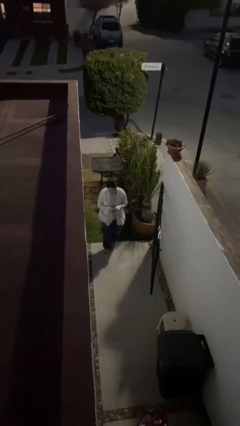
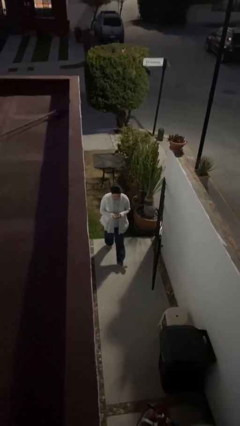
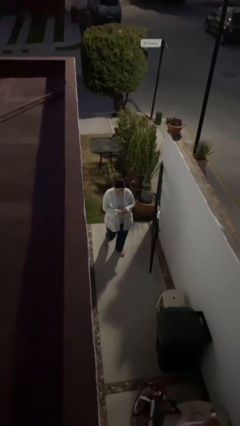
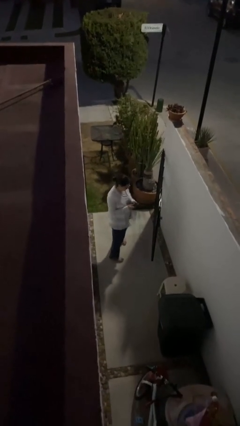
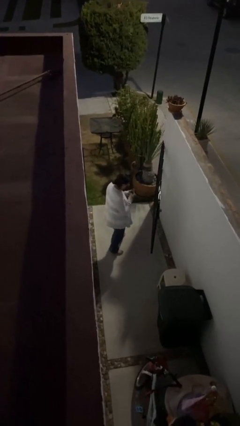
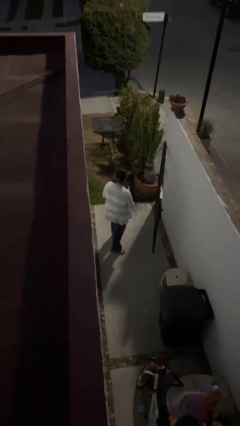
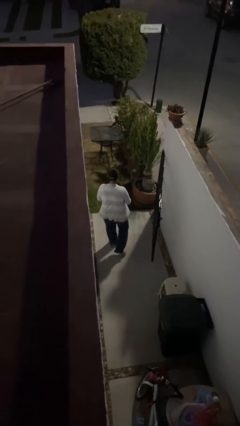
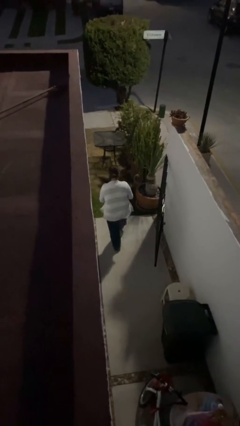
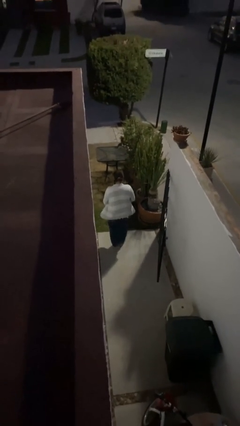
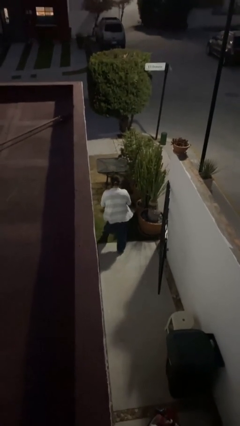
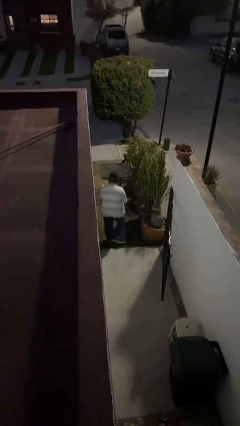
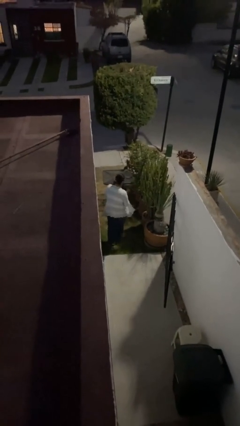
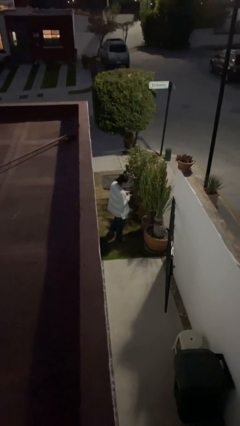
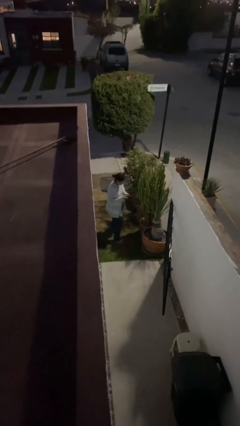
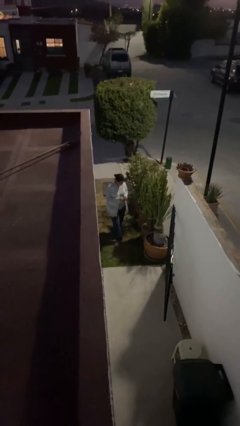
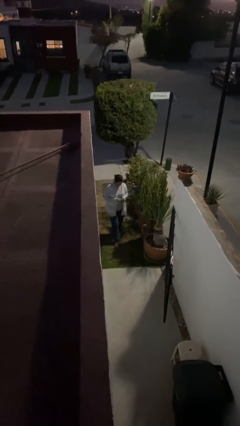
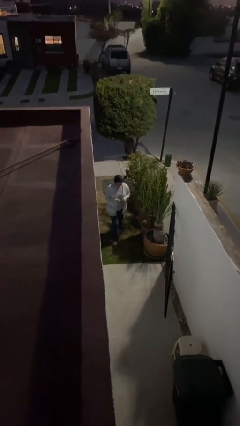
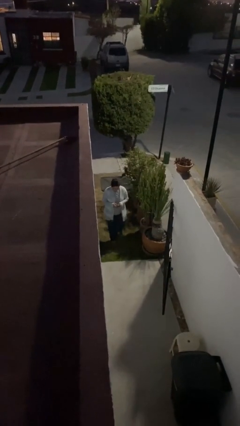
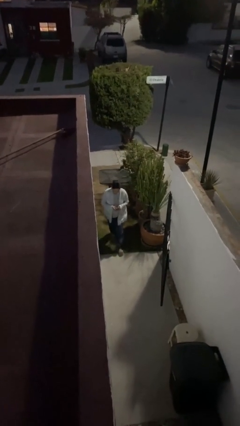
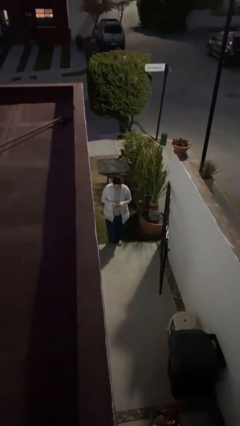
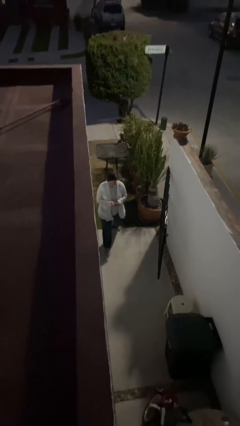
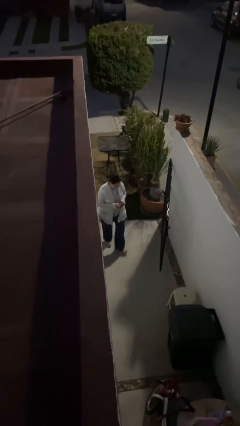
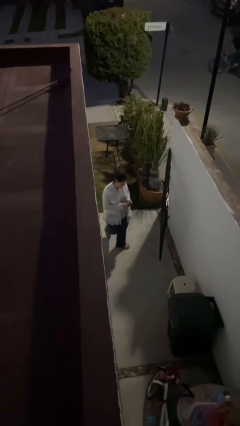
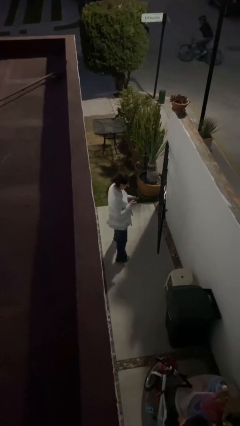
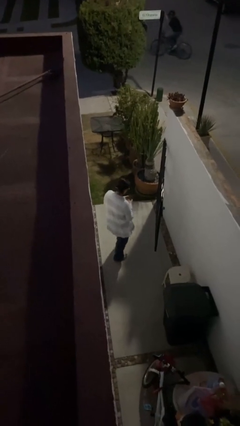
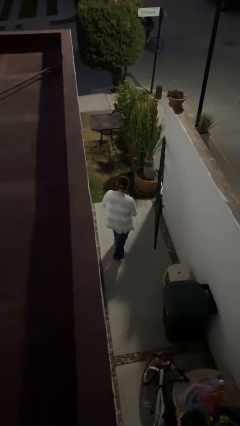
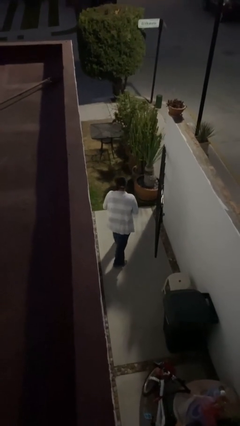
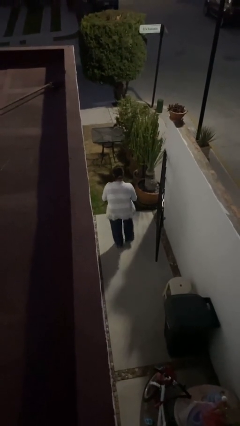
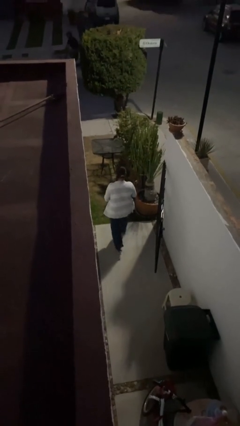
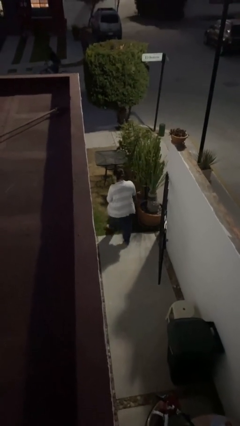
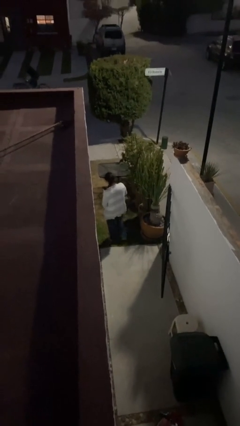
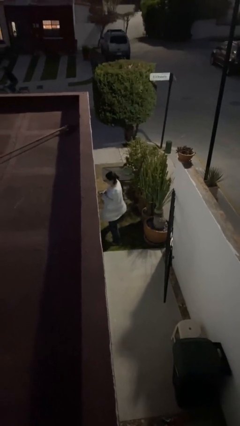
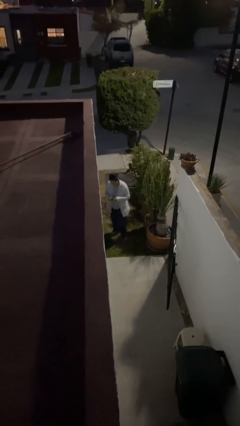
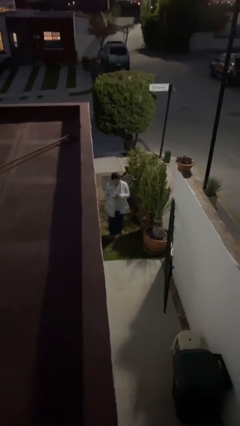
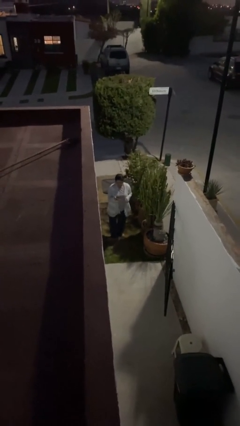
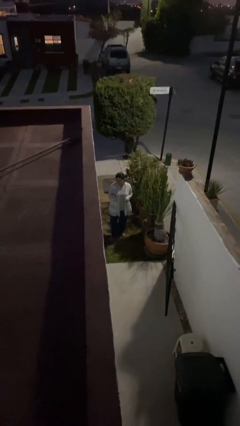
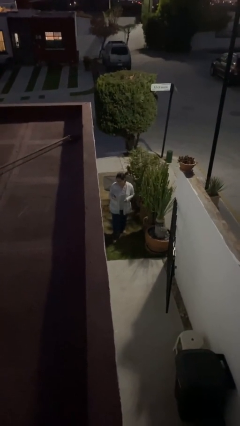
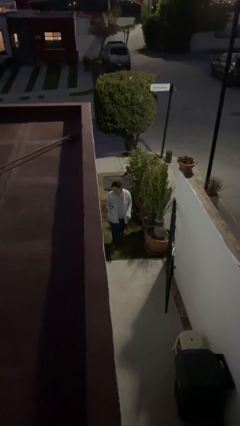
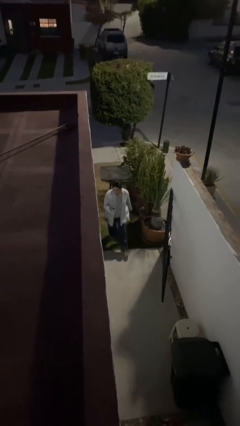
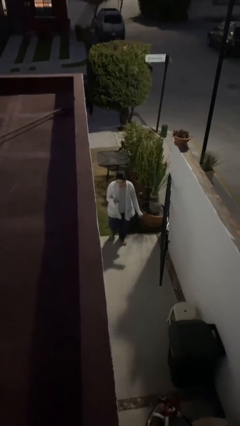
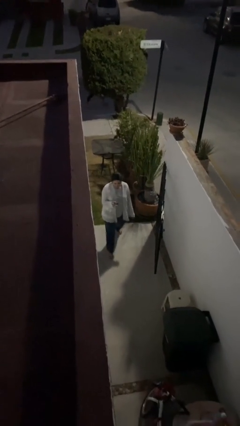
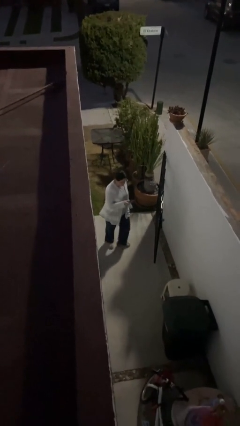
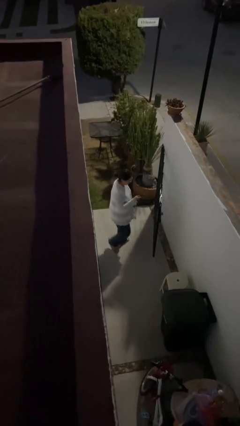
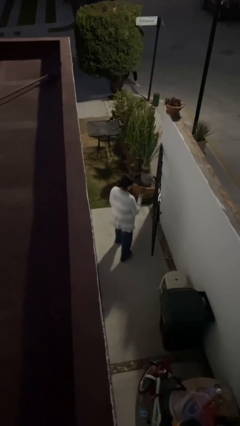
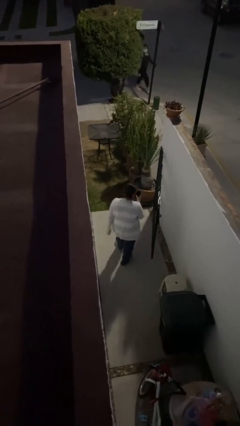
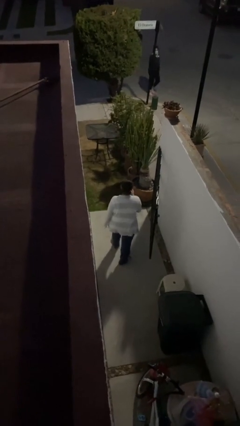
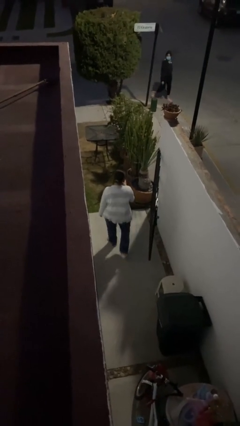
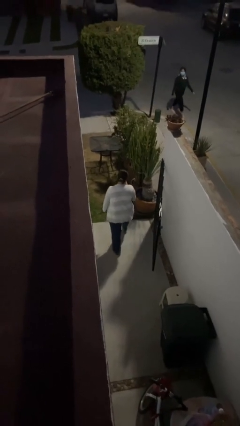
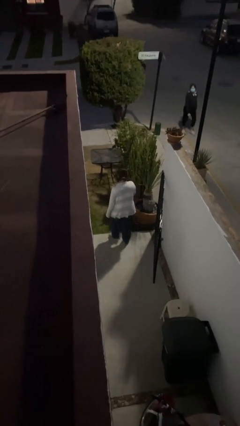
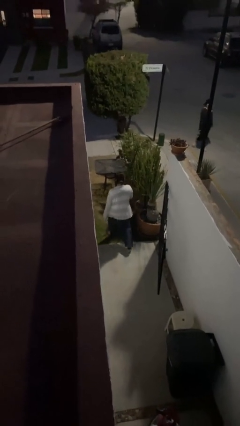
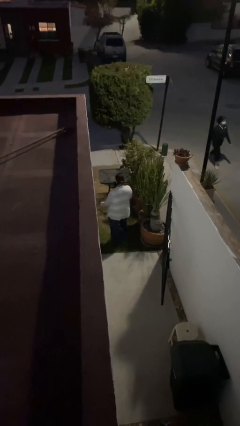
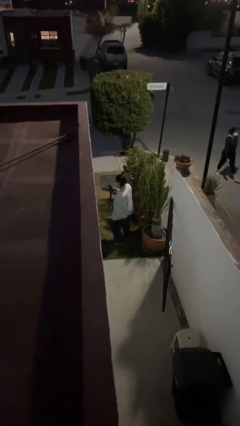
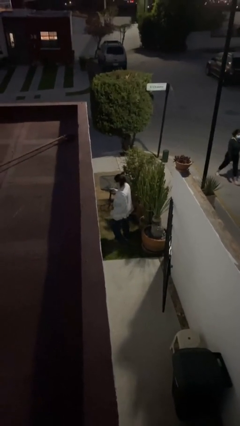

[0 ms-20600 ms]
person texts on phone

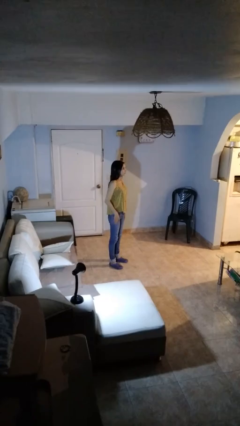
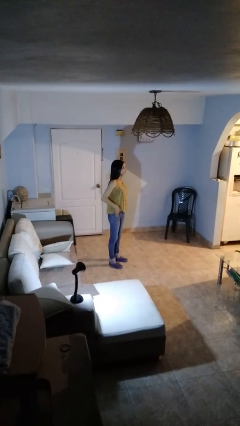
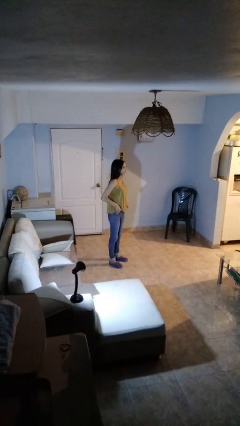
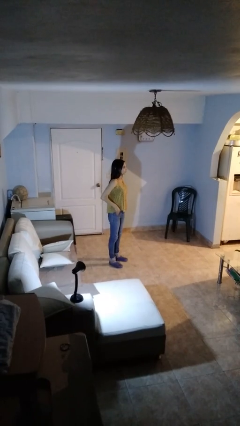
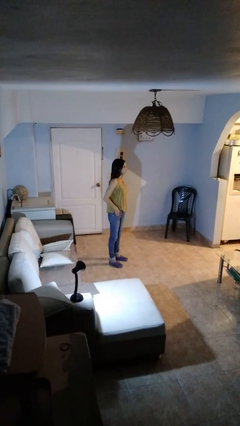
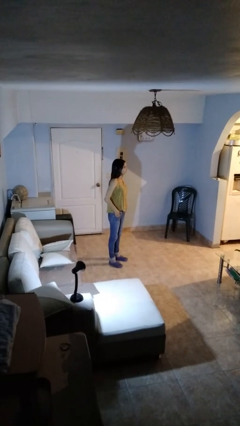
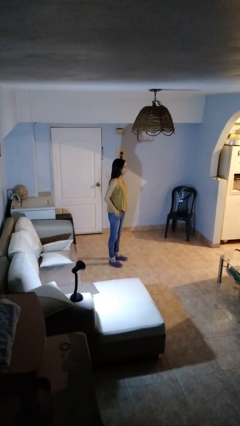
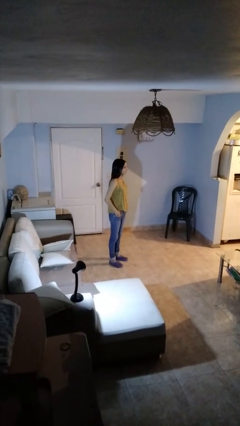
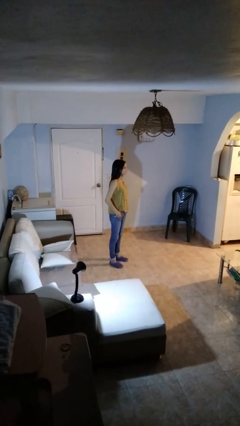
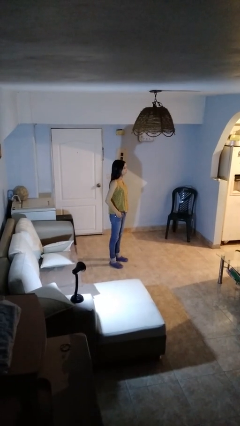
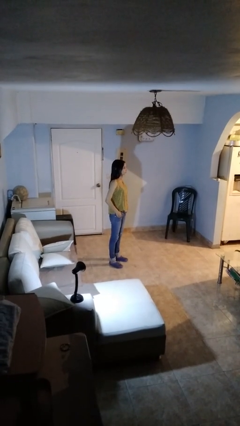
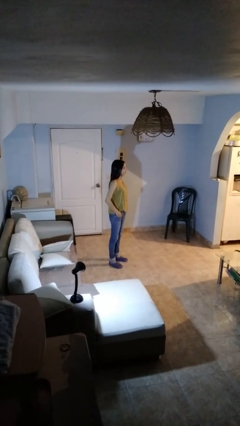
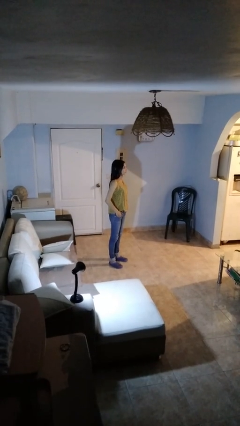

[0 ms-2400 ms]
person puts hands in back pockets

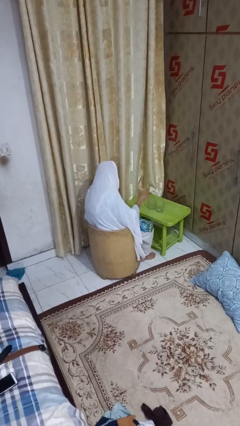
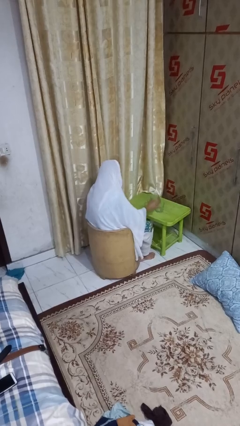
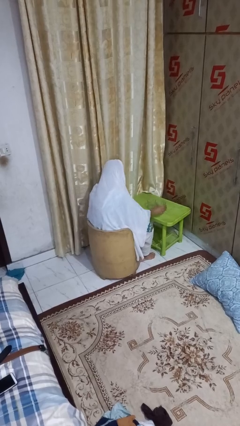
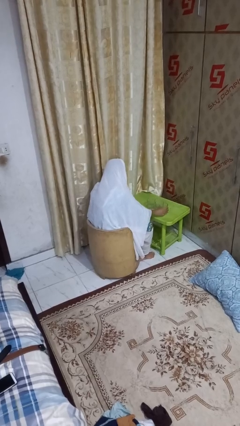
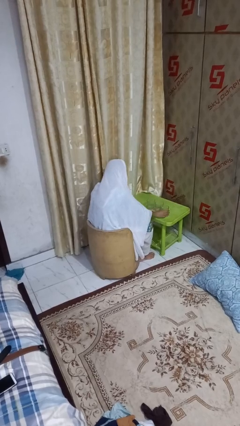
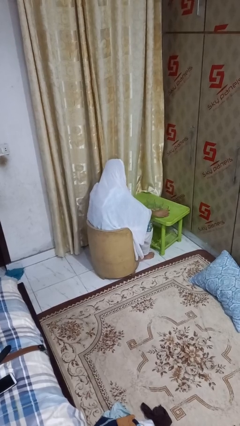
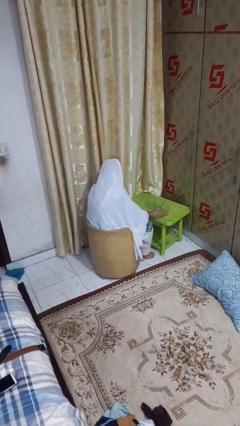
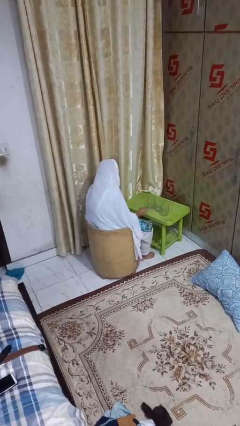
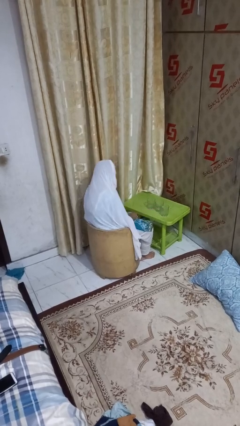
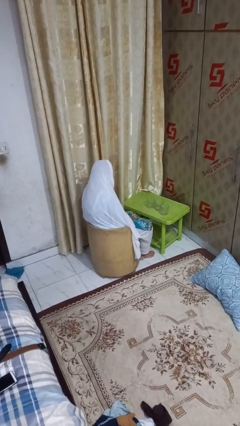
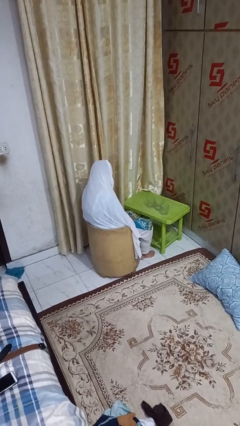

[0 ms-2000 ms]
person puts down object on table

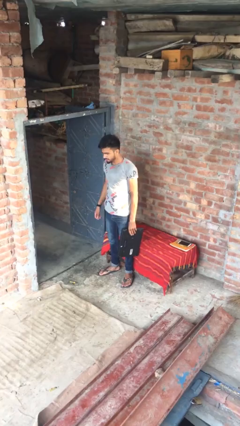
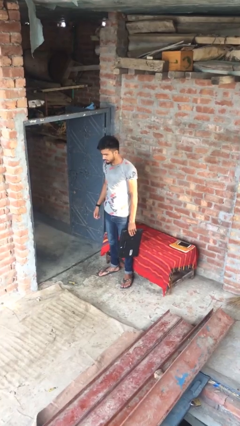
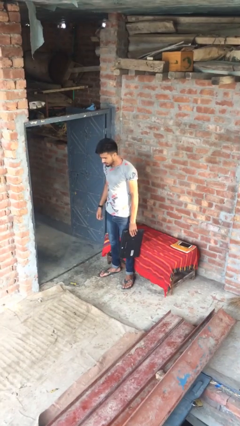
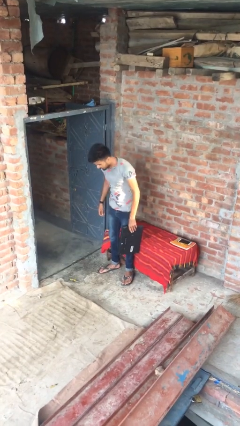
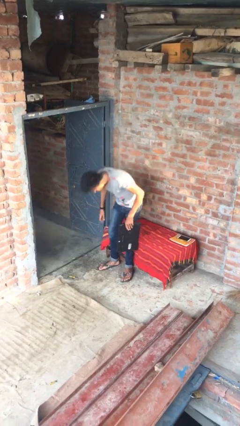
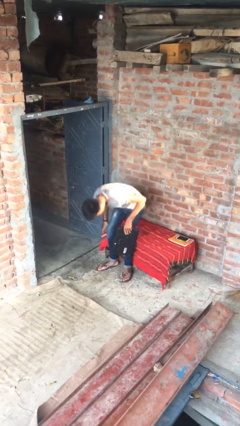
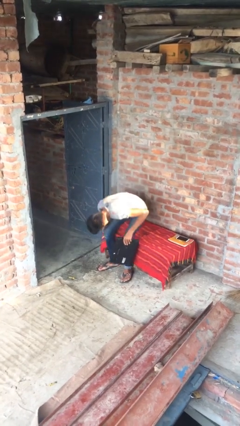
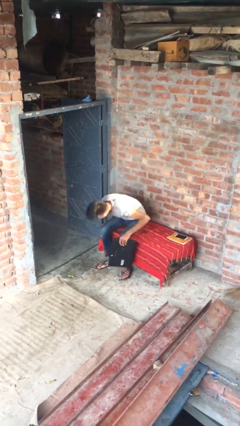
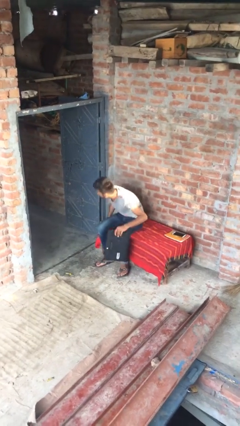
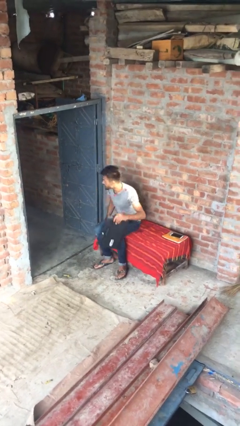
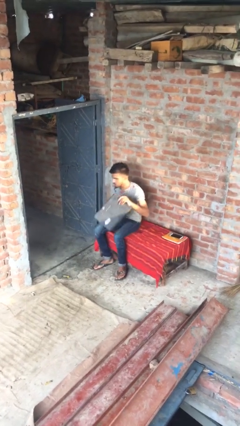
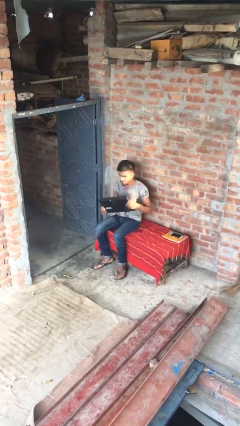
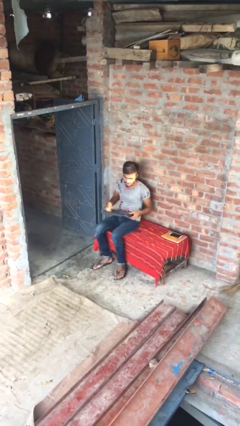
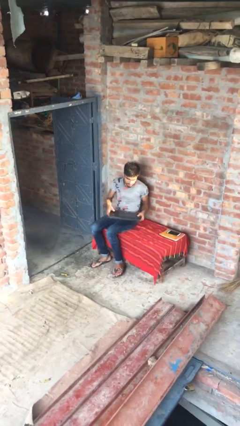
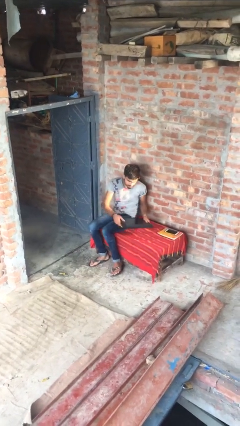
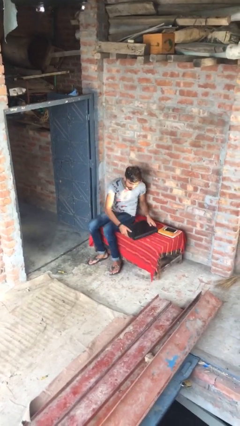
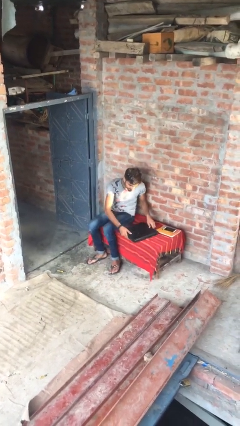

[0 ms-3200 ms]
person sits down
